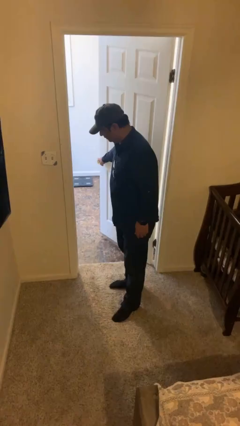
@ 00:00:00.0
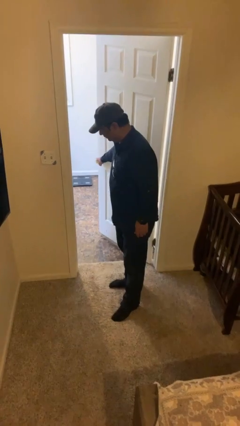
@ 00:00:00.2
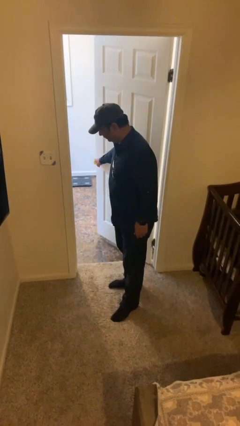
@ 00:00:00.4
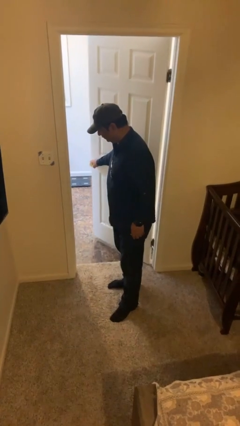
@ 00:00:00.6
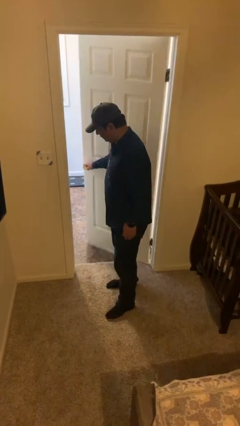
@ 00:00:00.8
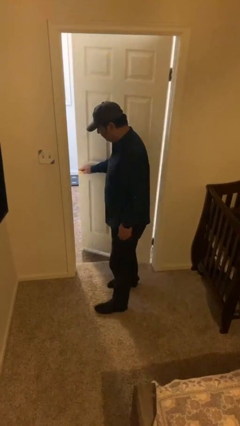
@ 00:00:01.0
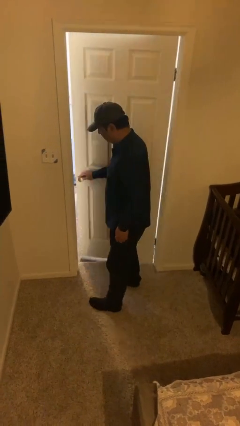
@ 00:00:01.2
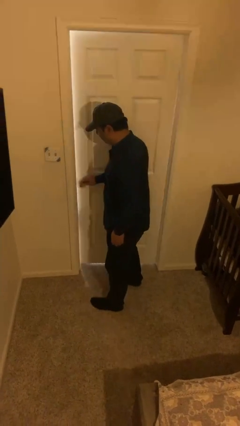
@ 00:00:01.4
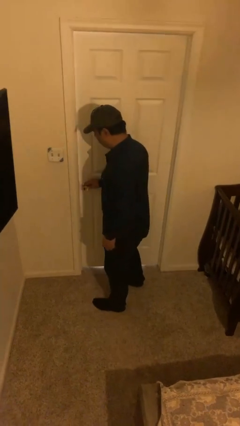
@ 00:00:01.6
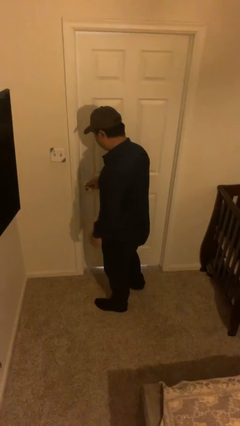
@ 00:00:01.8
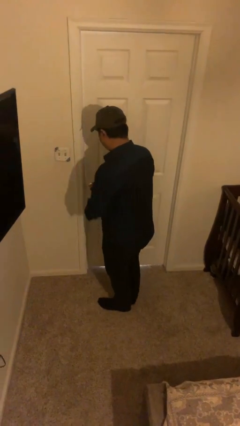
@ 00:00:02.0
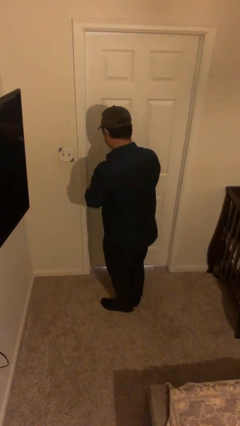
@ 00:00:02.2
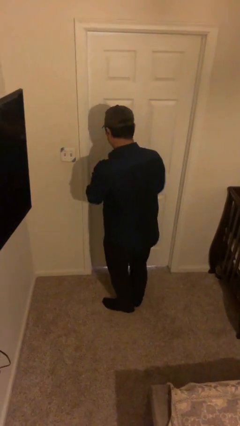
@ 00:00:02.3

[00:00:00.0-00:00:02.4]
person closes facility door

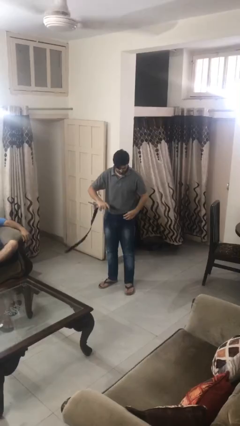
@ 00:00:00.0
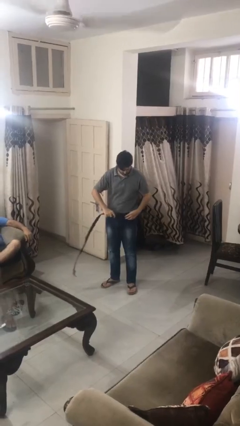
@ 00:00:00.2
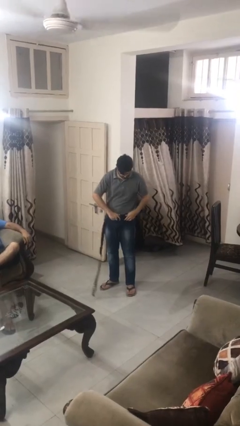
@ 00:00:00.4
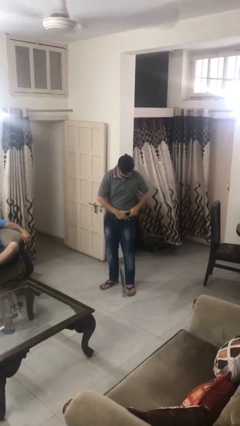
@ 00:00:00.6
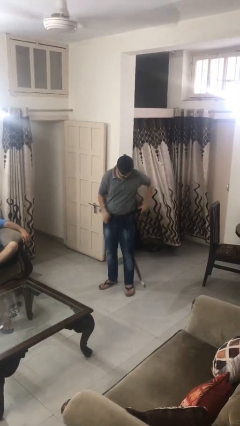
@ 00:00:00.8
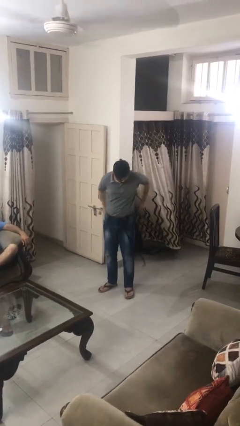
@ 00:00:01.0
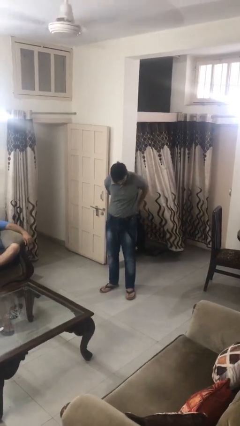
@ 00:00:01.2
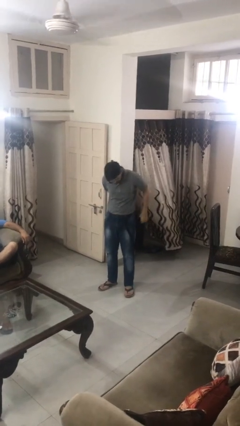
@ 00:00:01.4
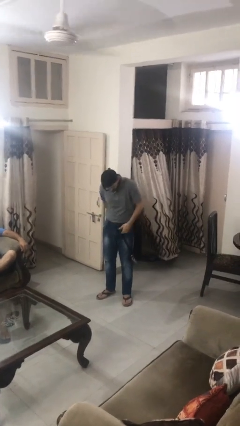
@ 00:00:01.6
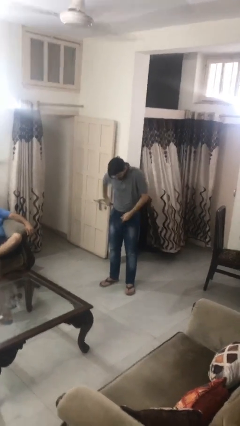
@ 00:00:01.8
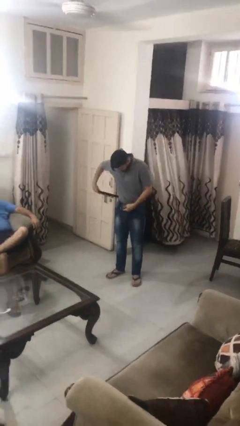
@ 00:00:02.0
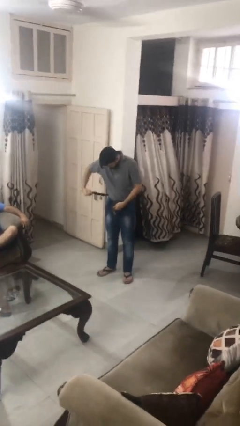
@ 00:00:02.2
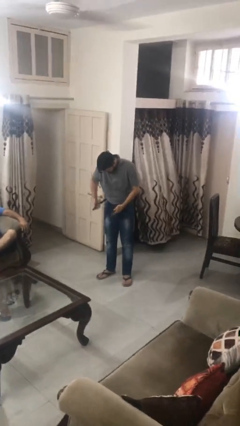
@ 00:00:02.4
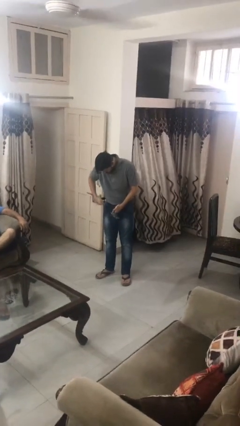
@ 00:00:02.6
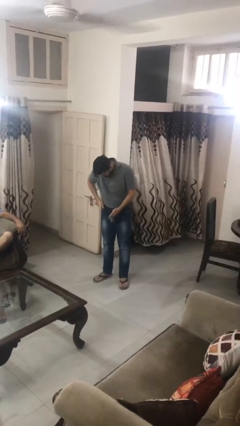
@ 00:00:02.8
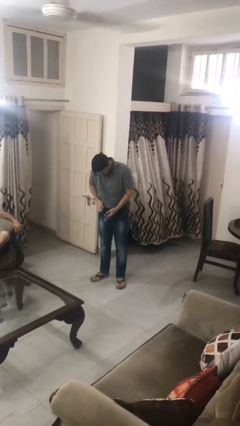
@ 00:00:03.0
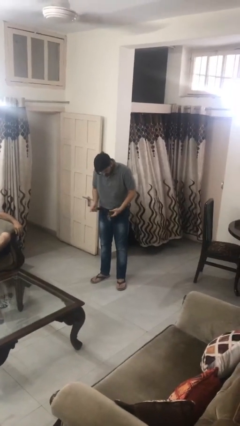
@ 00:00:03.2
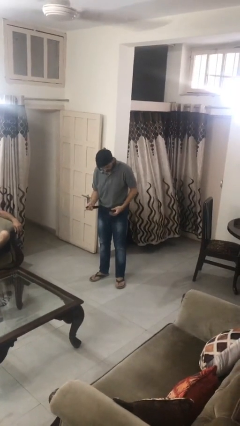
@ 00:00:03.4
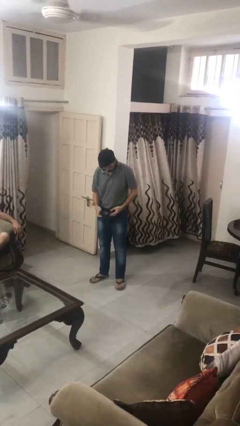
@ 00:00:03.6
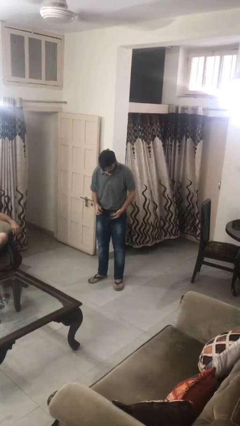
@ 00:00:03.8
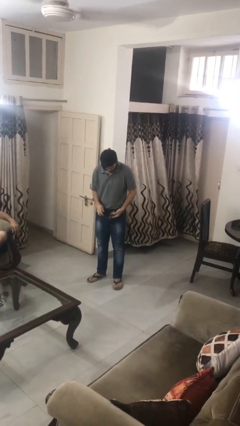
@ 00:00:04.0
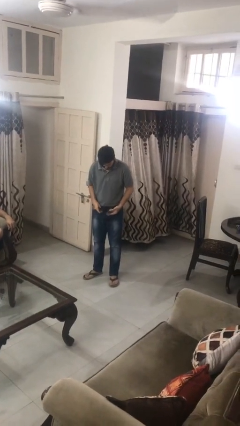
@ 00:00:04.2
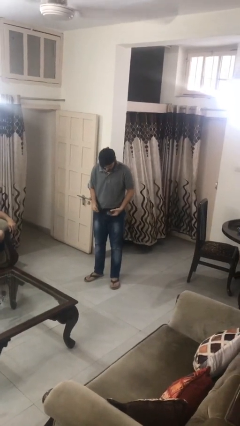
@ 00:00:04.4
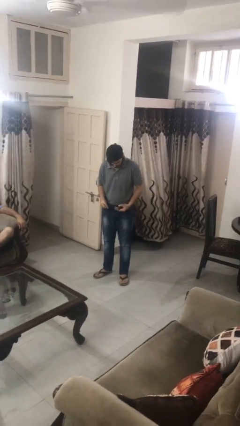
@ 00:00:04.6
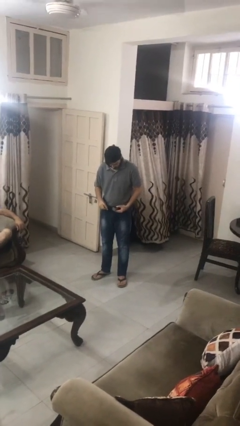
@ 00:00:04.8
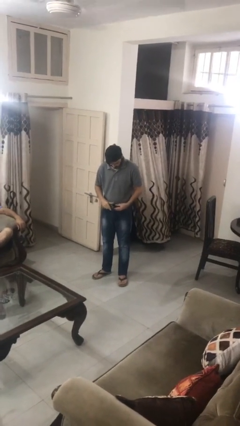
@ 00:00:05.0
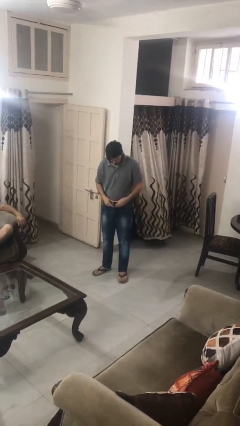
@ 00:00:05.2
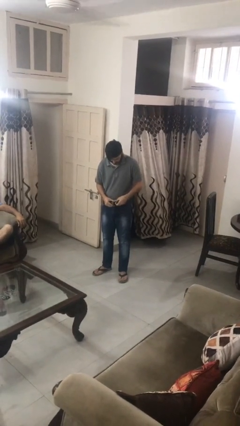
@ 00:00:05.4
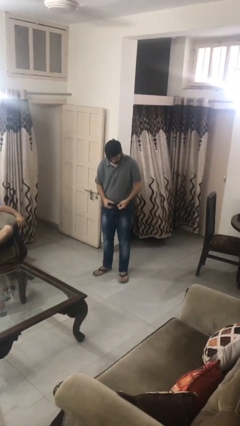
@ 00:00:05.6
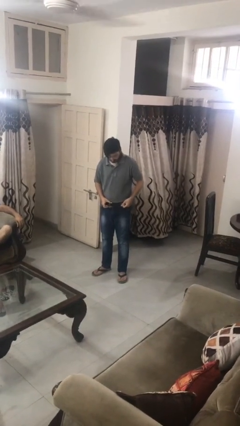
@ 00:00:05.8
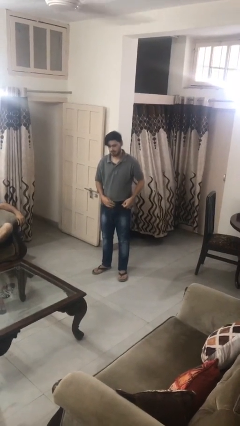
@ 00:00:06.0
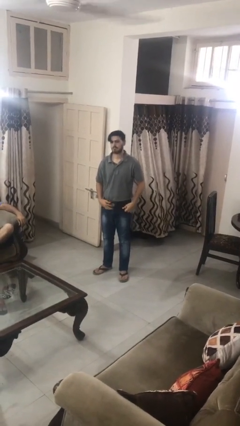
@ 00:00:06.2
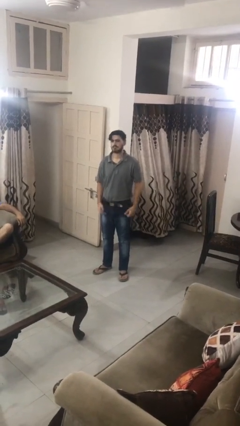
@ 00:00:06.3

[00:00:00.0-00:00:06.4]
person puts on belt

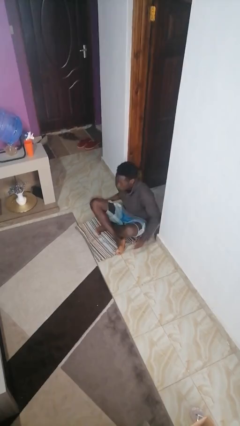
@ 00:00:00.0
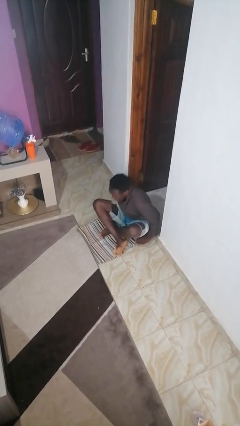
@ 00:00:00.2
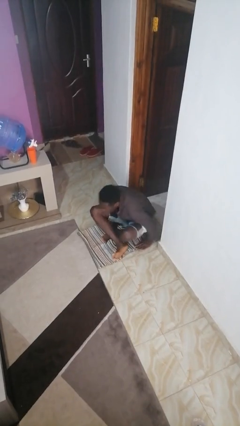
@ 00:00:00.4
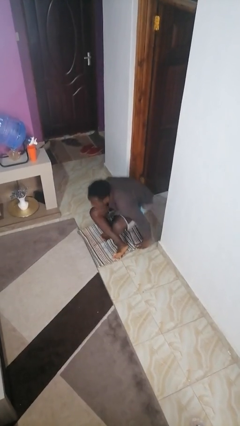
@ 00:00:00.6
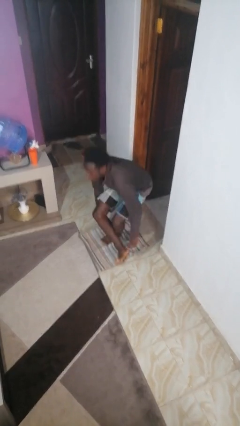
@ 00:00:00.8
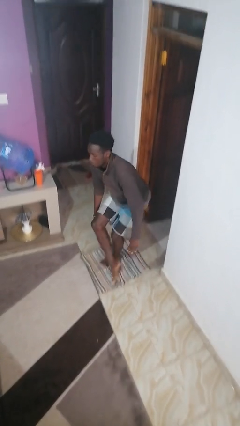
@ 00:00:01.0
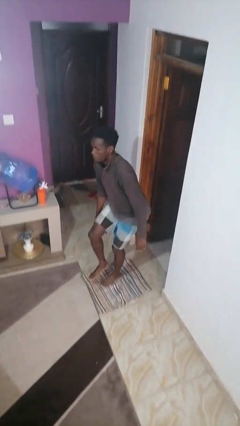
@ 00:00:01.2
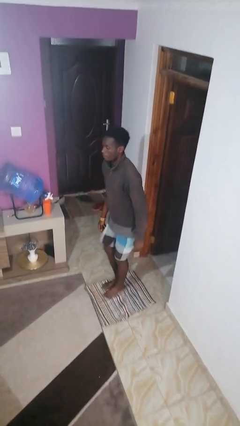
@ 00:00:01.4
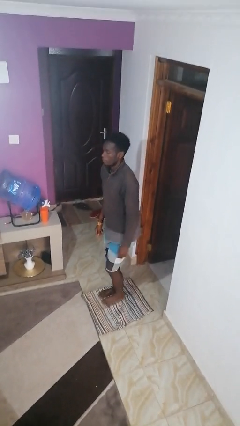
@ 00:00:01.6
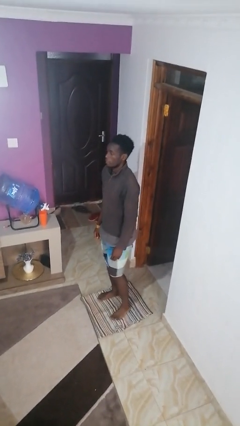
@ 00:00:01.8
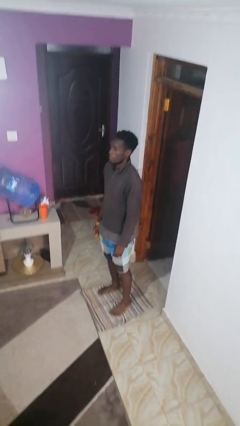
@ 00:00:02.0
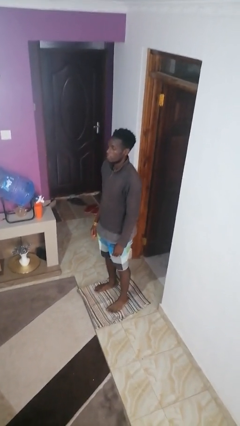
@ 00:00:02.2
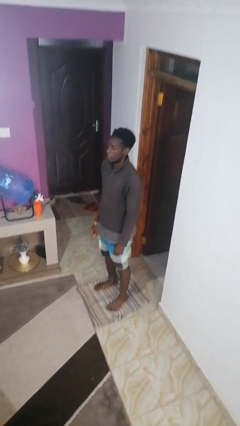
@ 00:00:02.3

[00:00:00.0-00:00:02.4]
person stands up from floor

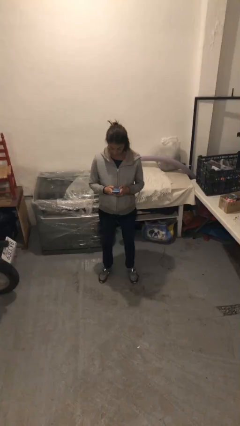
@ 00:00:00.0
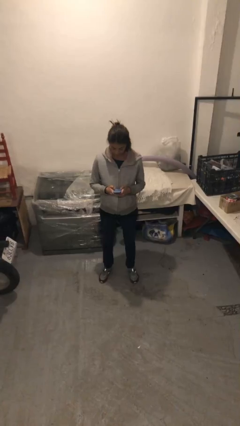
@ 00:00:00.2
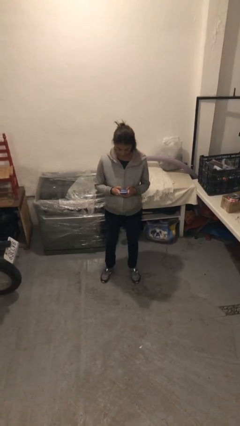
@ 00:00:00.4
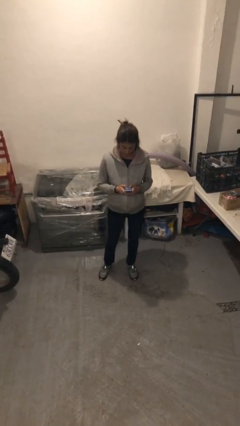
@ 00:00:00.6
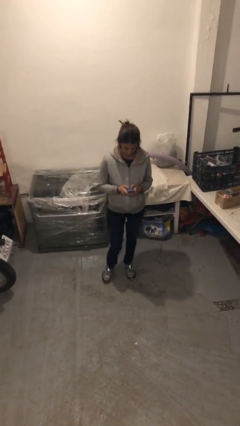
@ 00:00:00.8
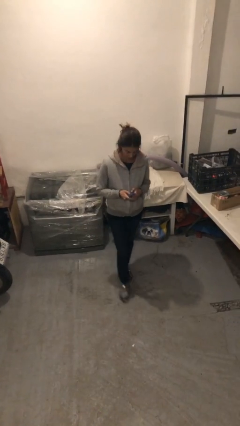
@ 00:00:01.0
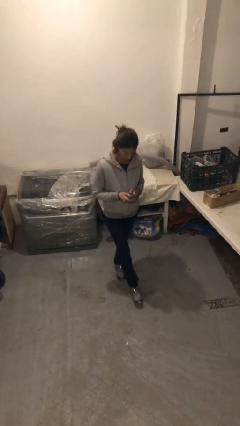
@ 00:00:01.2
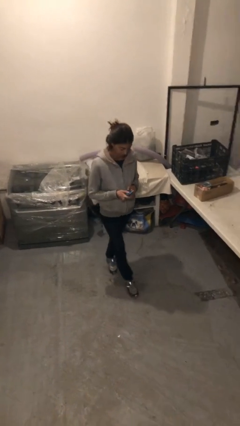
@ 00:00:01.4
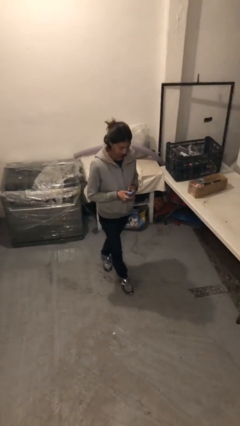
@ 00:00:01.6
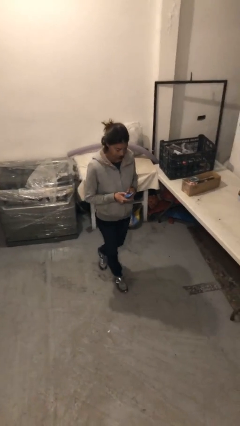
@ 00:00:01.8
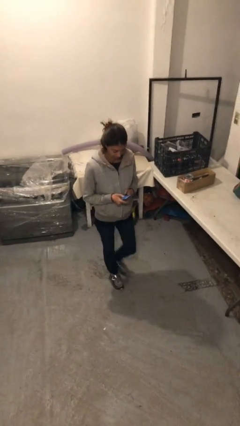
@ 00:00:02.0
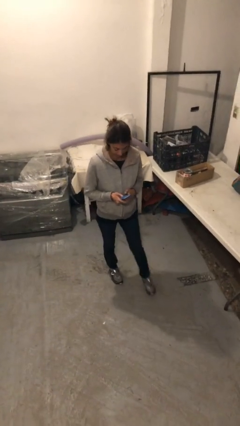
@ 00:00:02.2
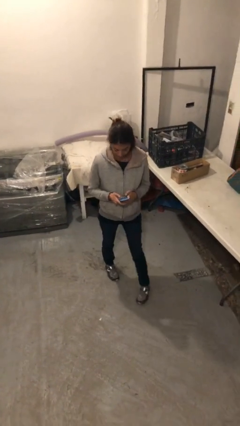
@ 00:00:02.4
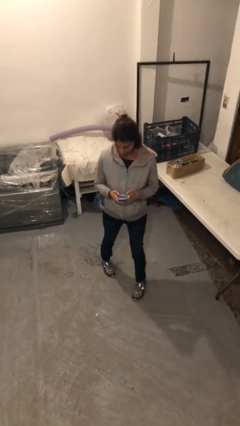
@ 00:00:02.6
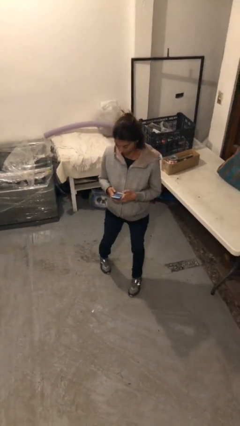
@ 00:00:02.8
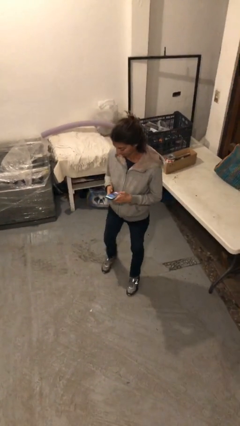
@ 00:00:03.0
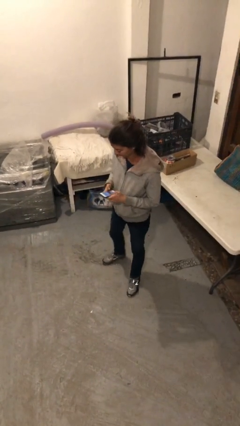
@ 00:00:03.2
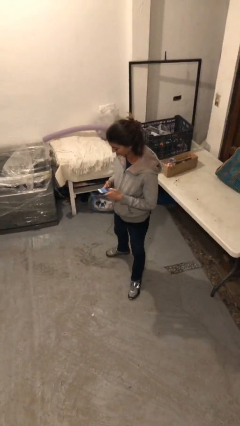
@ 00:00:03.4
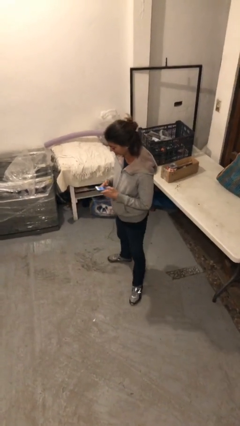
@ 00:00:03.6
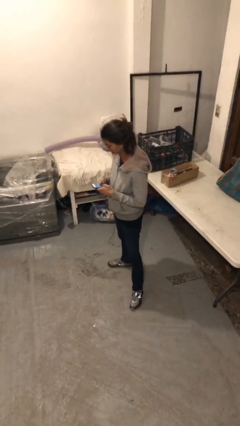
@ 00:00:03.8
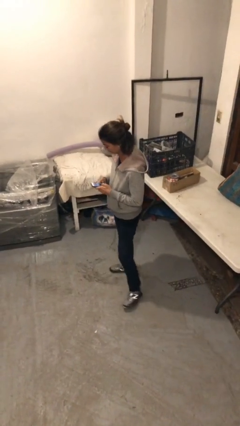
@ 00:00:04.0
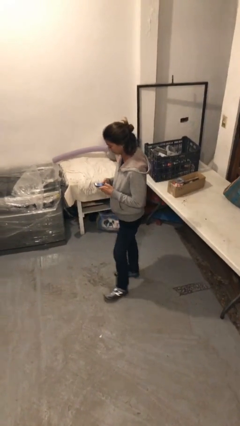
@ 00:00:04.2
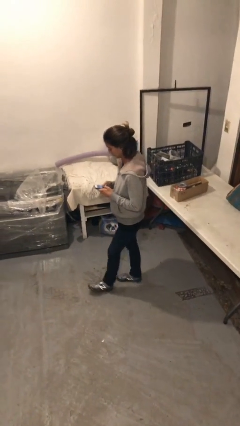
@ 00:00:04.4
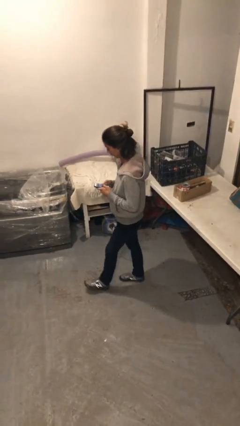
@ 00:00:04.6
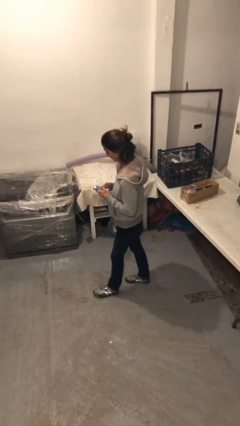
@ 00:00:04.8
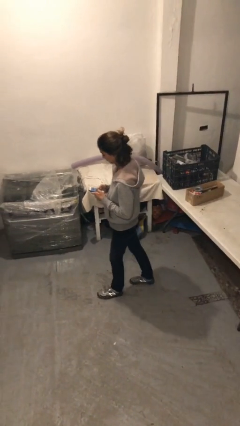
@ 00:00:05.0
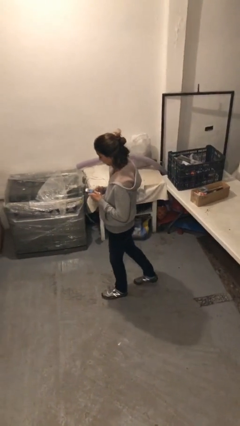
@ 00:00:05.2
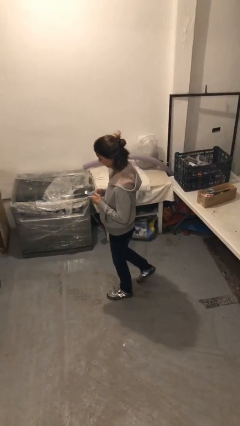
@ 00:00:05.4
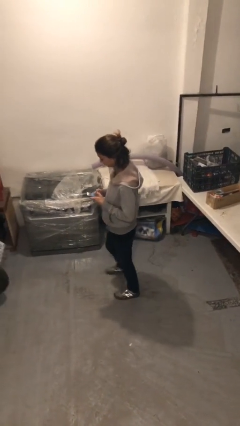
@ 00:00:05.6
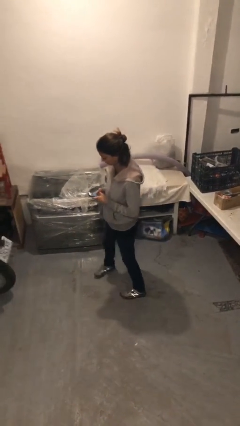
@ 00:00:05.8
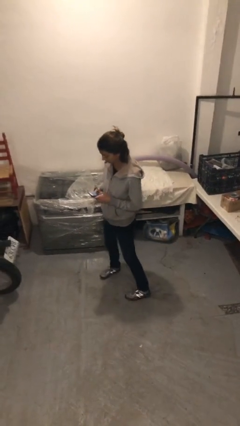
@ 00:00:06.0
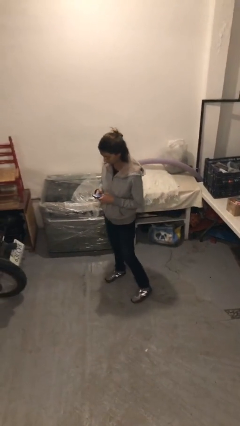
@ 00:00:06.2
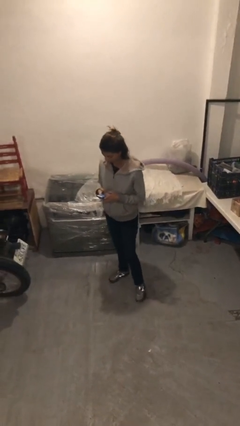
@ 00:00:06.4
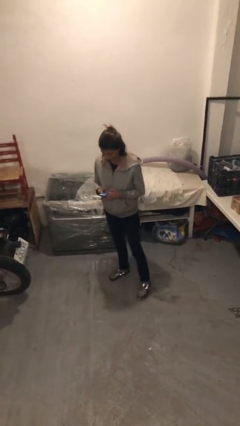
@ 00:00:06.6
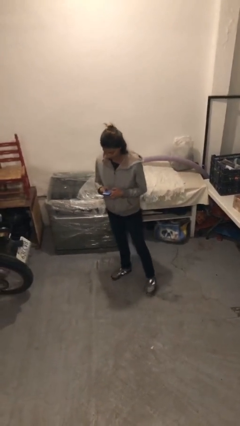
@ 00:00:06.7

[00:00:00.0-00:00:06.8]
person texts on phone
